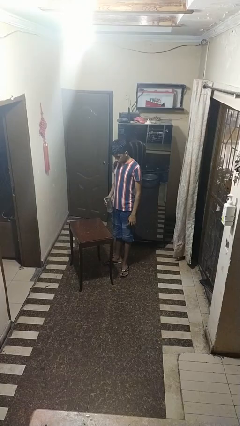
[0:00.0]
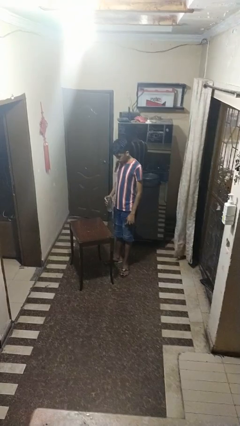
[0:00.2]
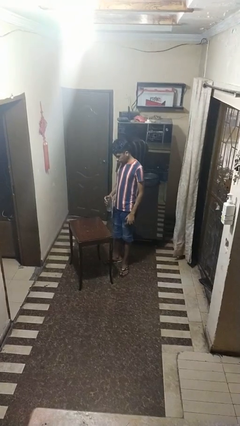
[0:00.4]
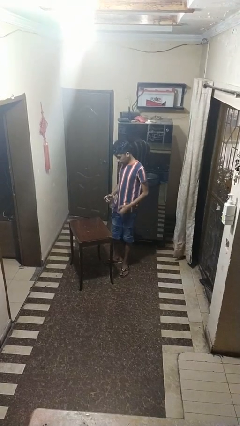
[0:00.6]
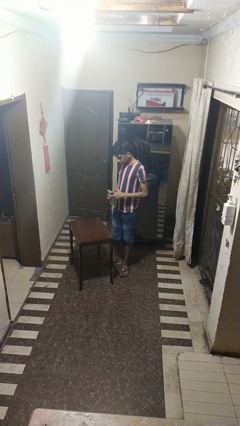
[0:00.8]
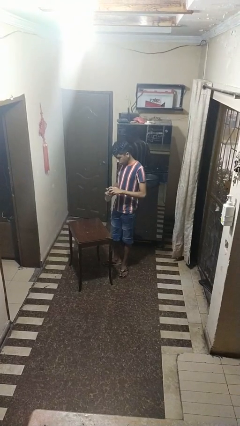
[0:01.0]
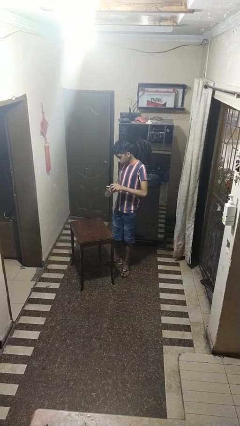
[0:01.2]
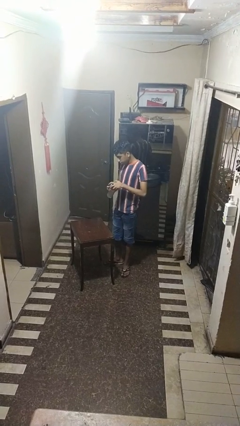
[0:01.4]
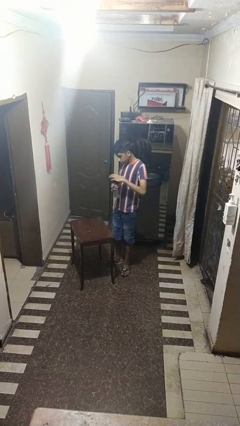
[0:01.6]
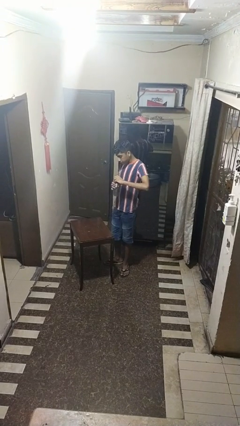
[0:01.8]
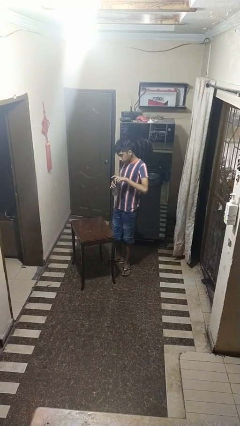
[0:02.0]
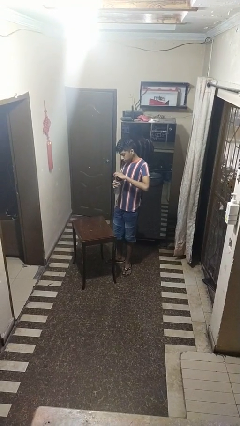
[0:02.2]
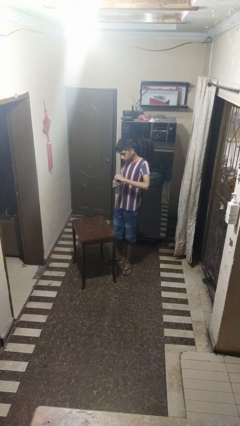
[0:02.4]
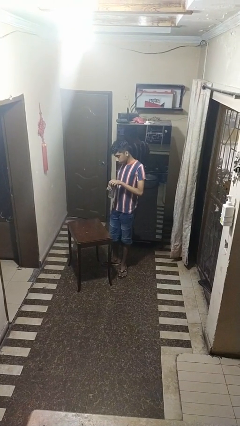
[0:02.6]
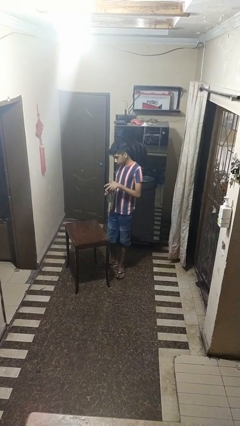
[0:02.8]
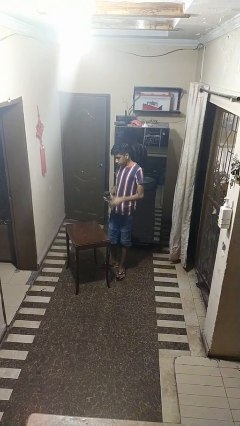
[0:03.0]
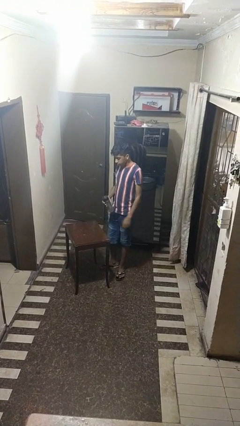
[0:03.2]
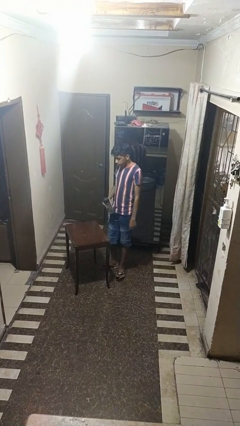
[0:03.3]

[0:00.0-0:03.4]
person screws lid to bottle

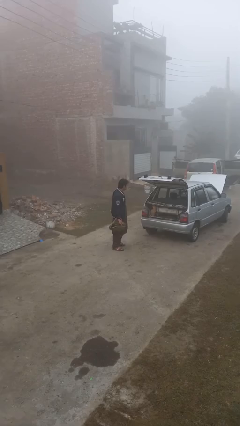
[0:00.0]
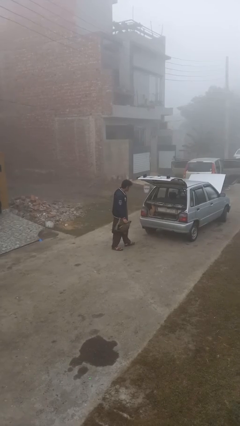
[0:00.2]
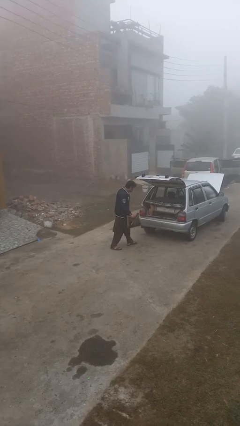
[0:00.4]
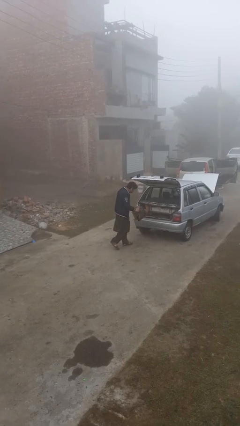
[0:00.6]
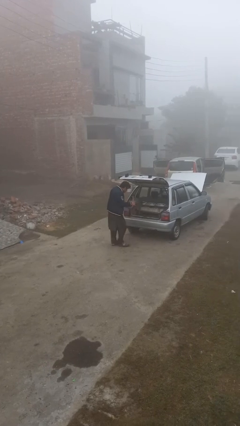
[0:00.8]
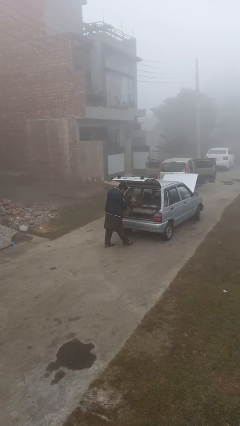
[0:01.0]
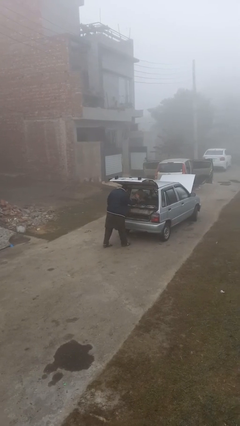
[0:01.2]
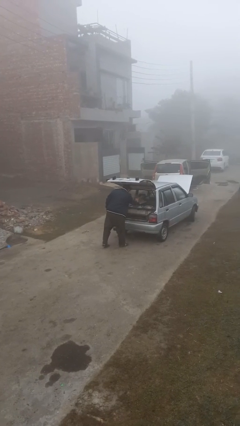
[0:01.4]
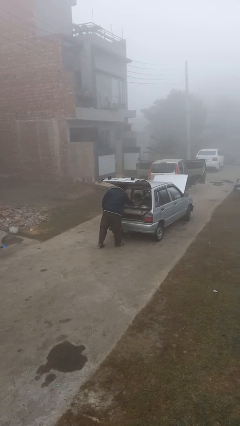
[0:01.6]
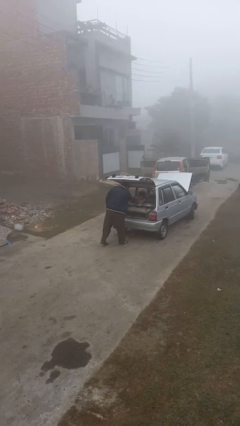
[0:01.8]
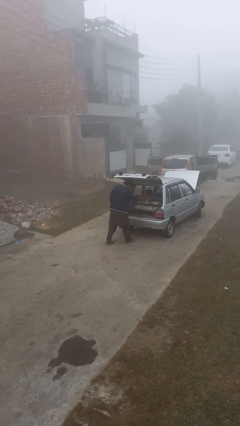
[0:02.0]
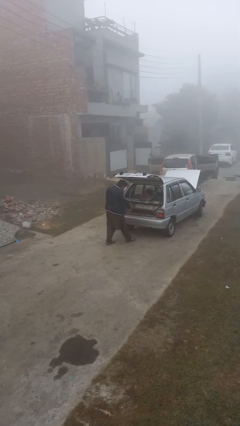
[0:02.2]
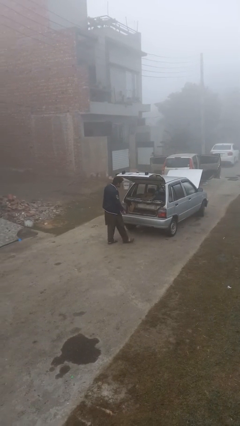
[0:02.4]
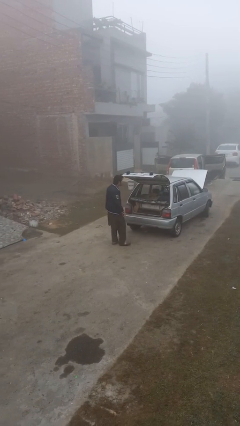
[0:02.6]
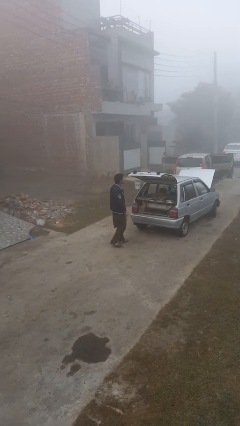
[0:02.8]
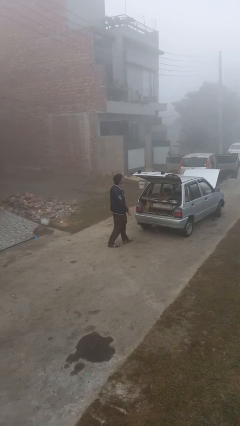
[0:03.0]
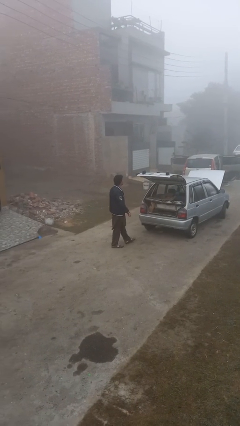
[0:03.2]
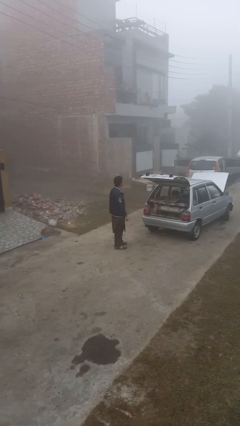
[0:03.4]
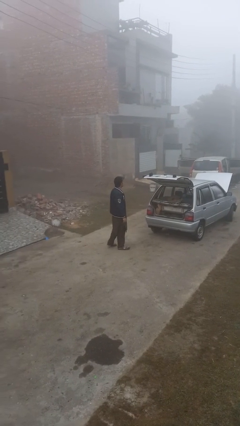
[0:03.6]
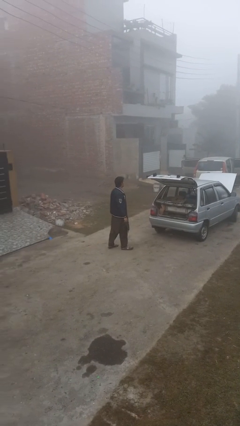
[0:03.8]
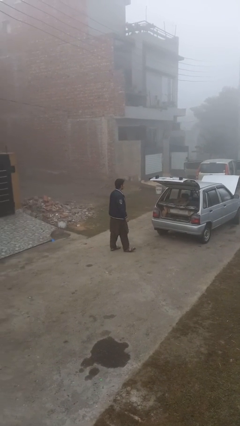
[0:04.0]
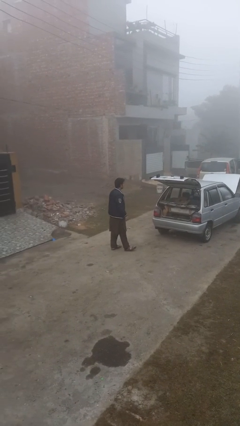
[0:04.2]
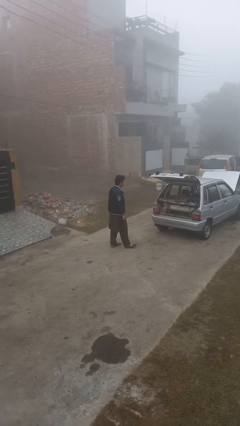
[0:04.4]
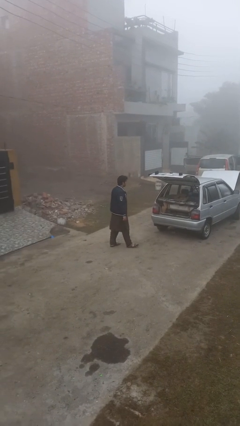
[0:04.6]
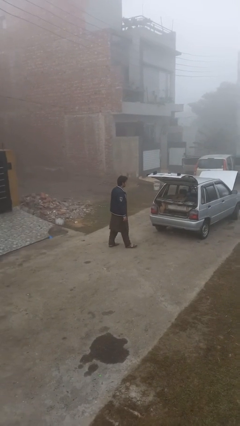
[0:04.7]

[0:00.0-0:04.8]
person loads car

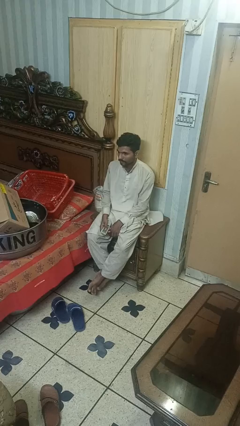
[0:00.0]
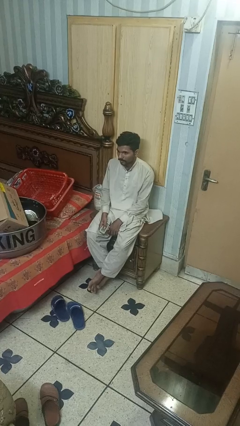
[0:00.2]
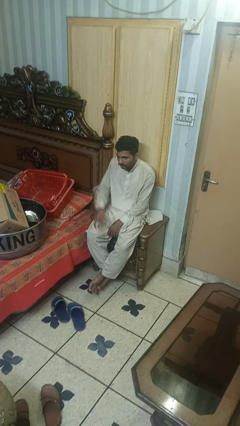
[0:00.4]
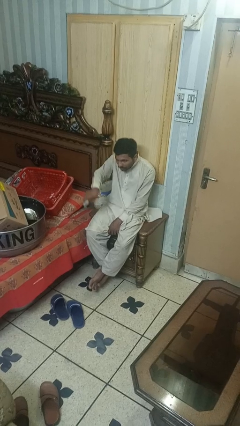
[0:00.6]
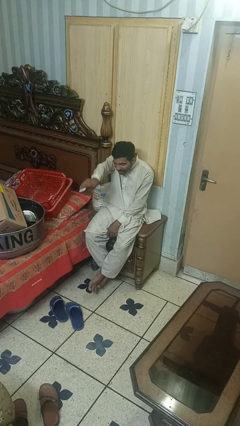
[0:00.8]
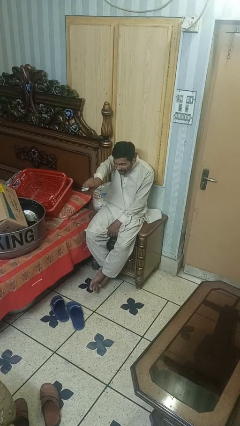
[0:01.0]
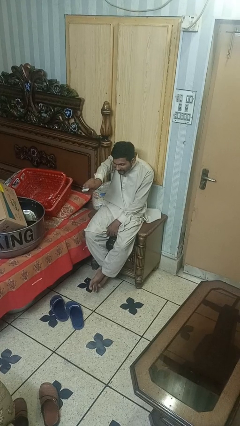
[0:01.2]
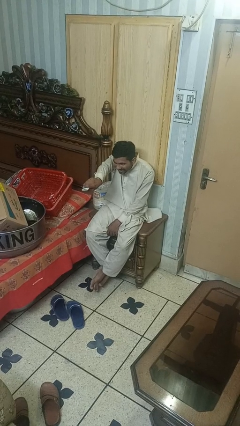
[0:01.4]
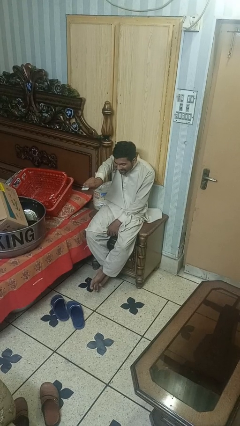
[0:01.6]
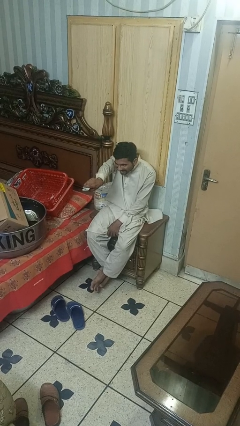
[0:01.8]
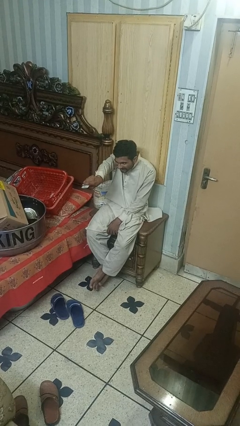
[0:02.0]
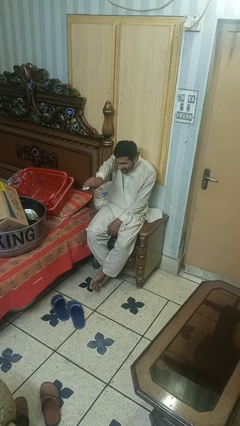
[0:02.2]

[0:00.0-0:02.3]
person uses television remote

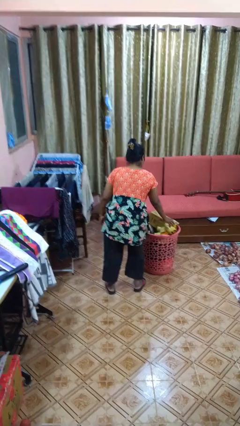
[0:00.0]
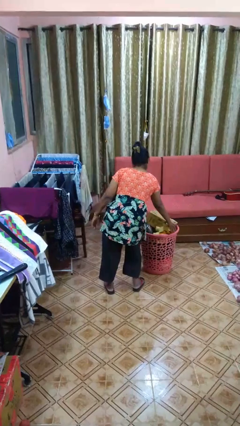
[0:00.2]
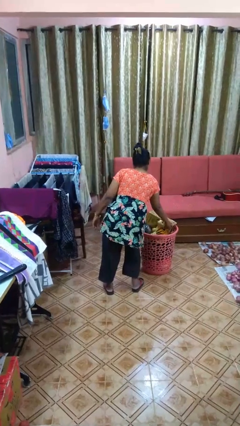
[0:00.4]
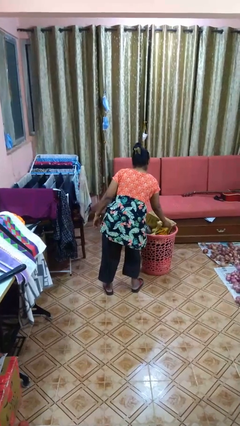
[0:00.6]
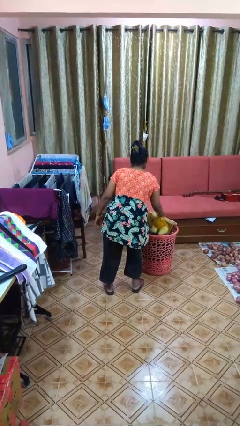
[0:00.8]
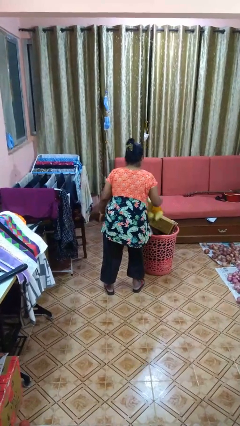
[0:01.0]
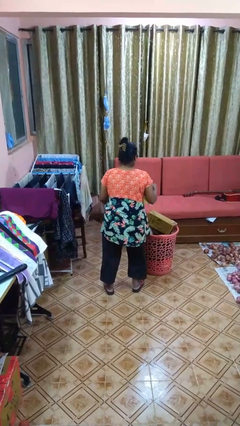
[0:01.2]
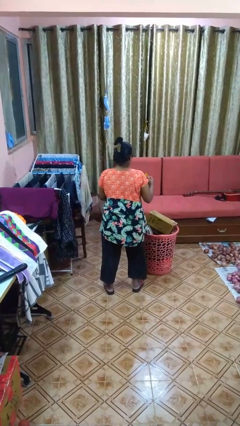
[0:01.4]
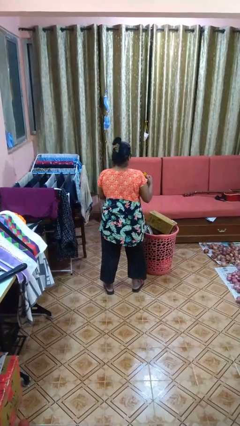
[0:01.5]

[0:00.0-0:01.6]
person takes object from basket

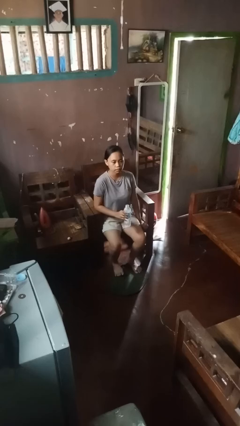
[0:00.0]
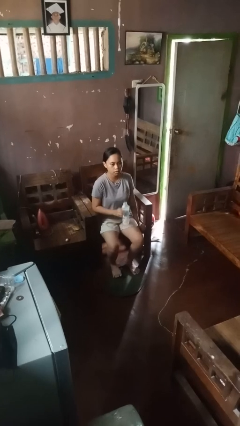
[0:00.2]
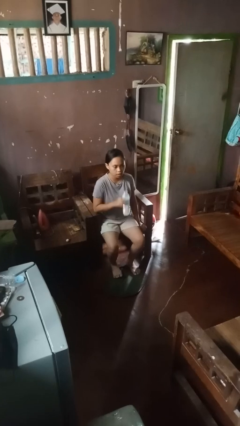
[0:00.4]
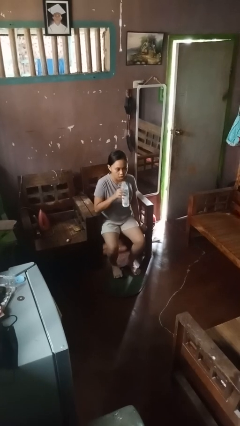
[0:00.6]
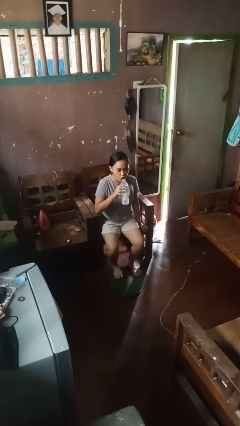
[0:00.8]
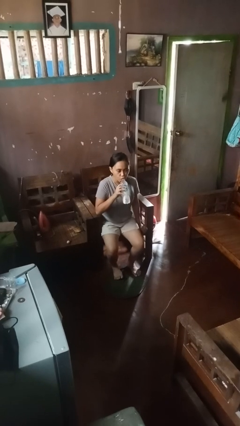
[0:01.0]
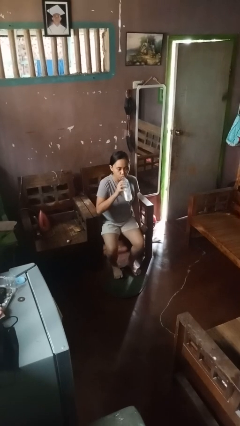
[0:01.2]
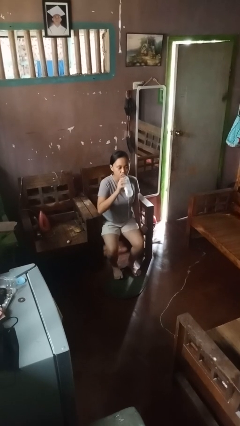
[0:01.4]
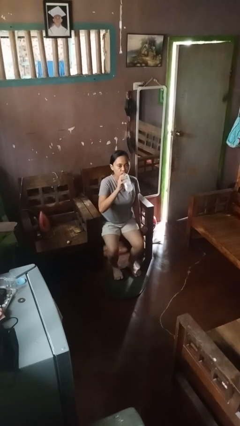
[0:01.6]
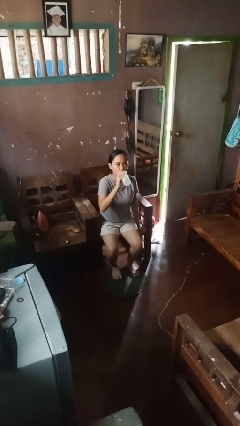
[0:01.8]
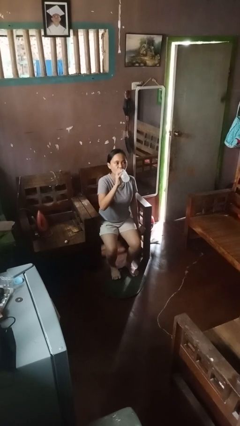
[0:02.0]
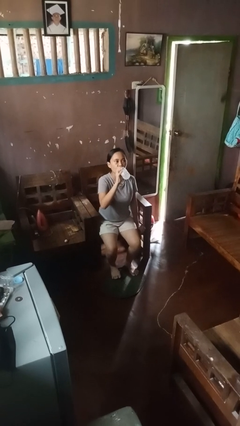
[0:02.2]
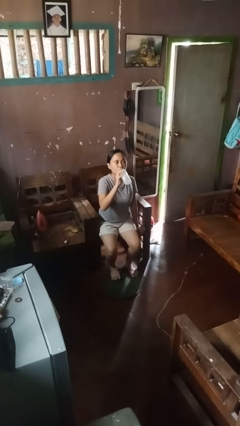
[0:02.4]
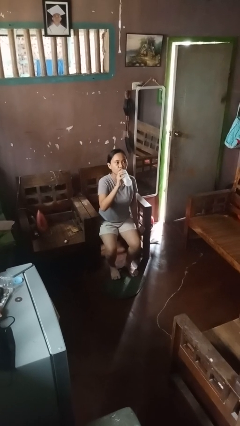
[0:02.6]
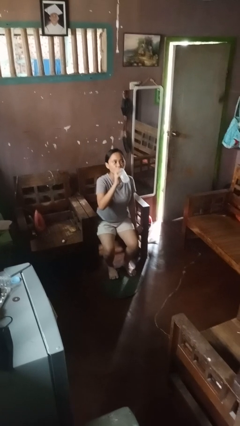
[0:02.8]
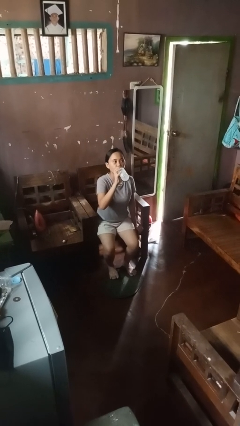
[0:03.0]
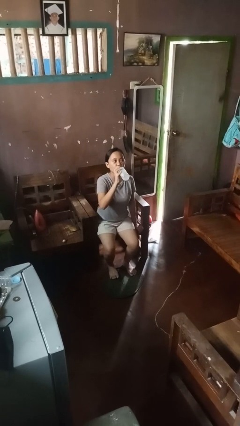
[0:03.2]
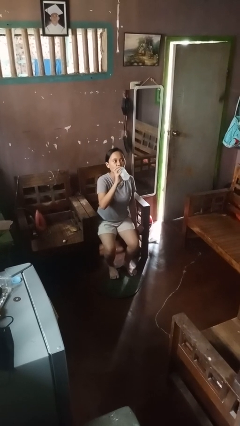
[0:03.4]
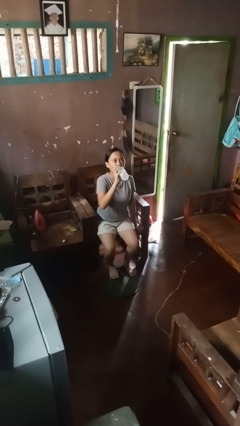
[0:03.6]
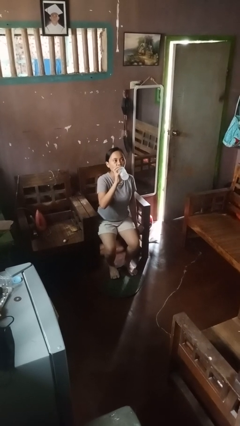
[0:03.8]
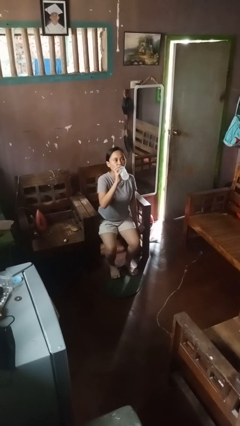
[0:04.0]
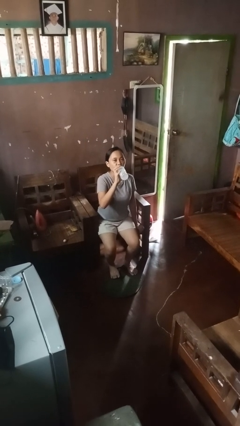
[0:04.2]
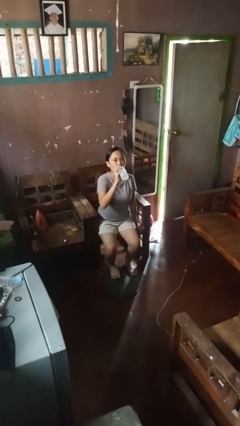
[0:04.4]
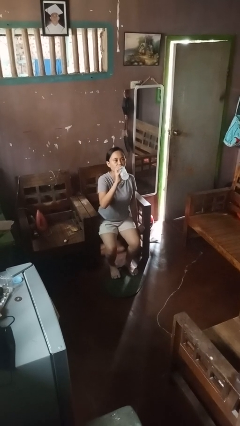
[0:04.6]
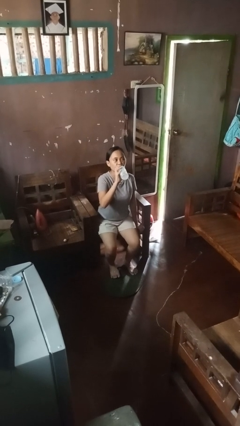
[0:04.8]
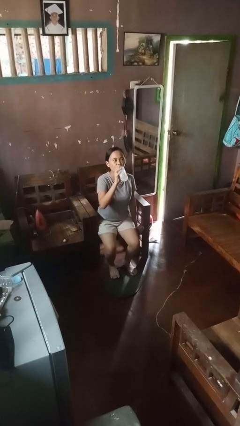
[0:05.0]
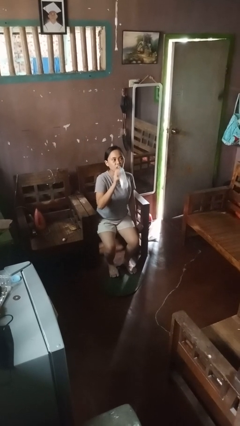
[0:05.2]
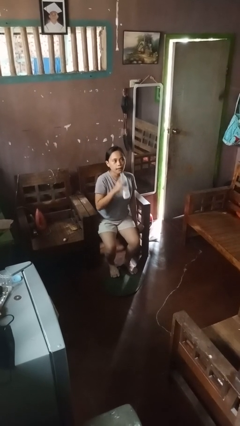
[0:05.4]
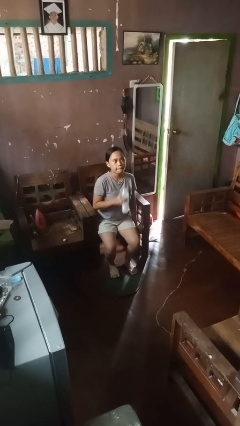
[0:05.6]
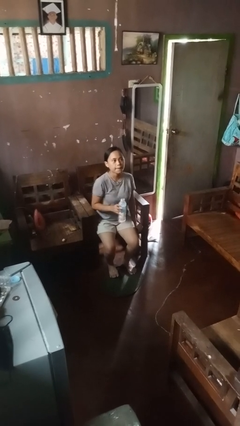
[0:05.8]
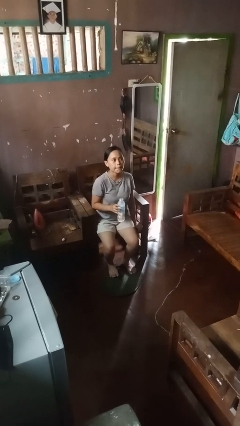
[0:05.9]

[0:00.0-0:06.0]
person drinks from bottle
